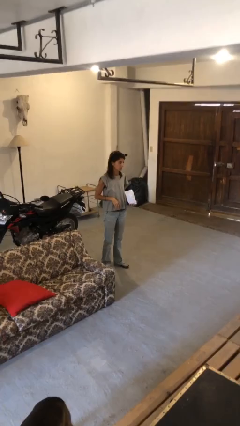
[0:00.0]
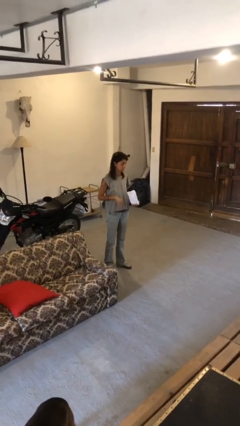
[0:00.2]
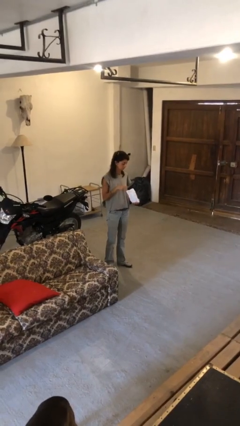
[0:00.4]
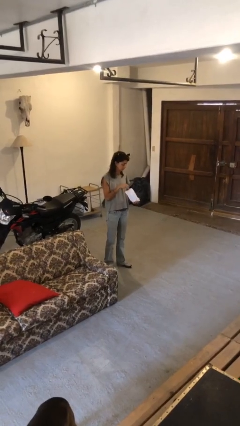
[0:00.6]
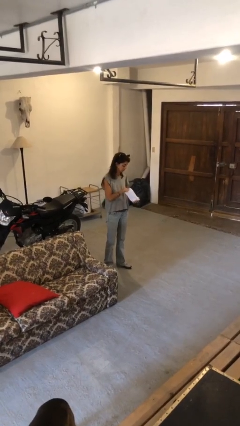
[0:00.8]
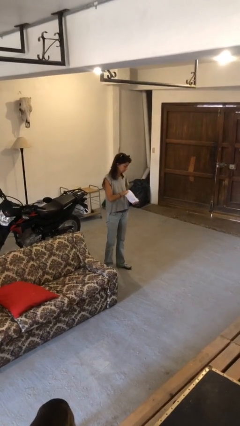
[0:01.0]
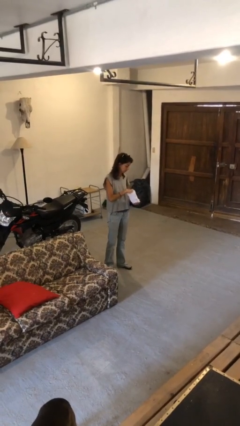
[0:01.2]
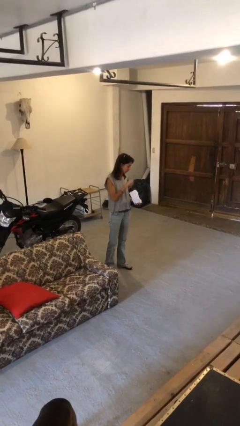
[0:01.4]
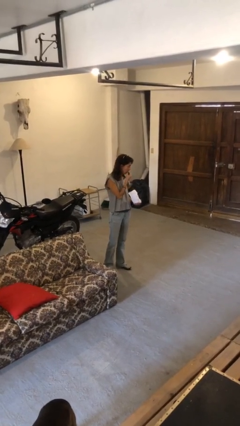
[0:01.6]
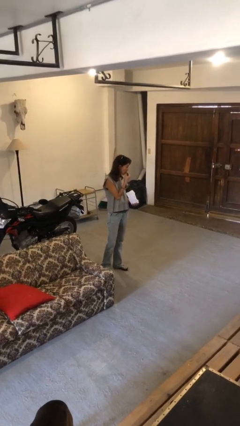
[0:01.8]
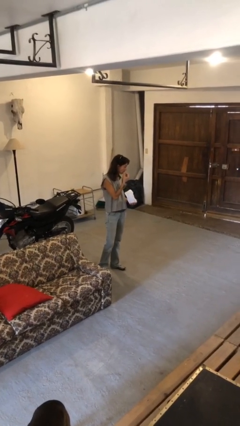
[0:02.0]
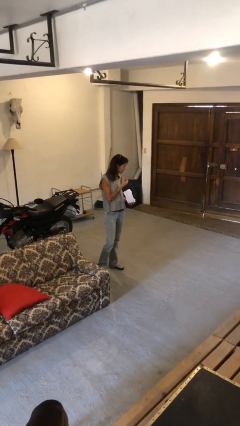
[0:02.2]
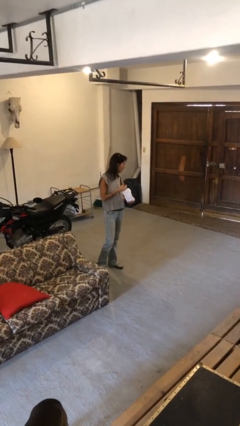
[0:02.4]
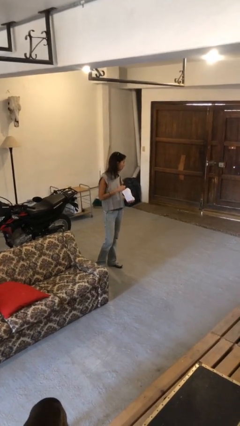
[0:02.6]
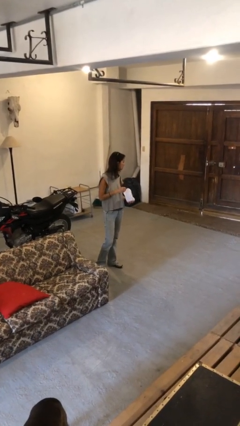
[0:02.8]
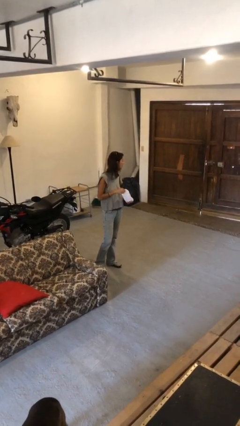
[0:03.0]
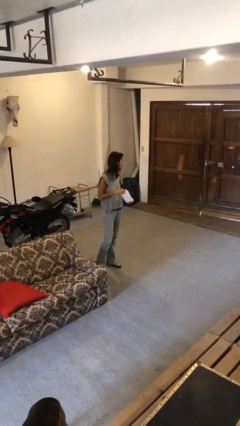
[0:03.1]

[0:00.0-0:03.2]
person eats snack from bag

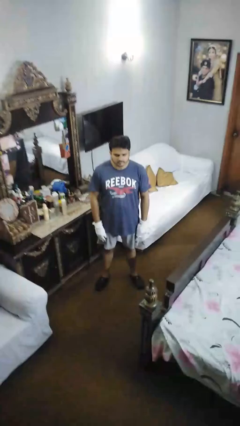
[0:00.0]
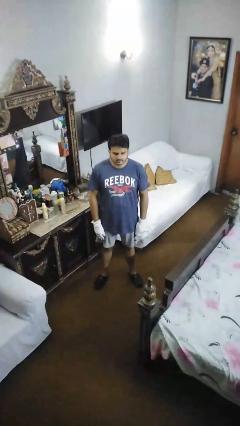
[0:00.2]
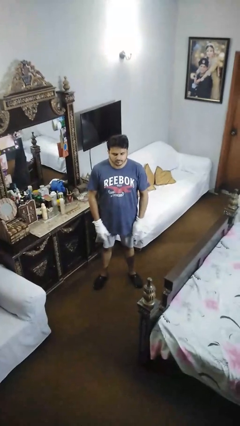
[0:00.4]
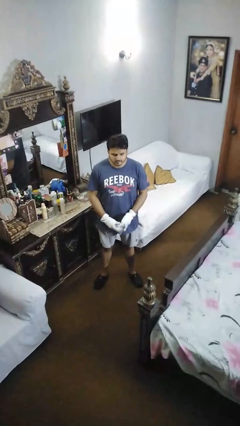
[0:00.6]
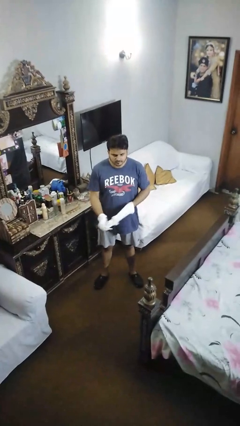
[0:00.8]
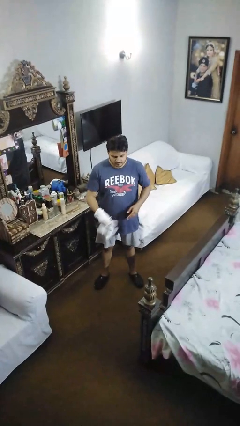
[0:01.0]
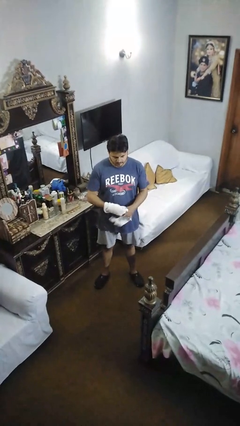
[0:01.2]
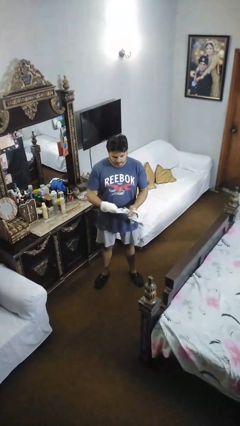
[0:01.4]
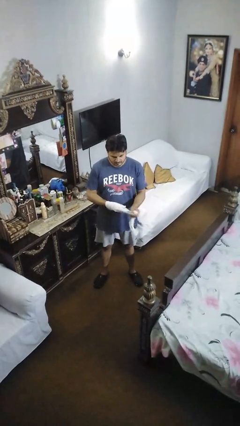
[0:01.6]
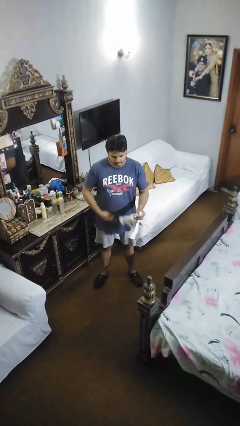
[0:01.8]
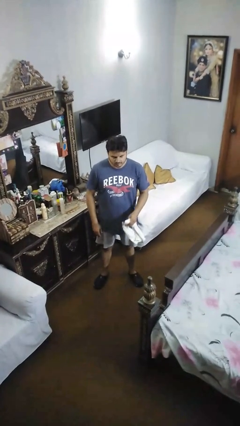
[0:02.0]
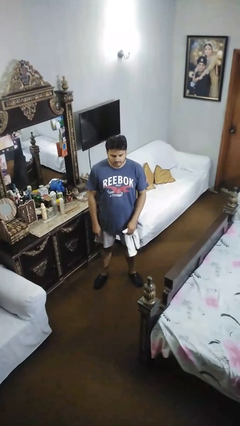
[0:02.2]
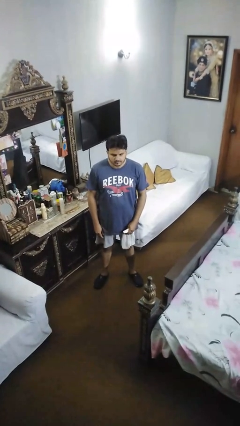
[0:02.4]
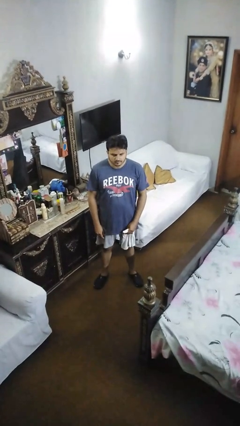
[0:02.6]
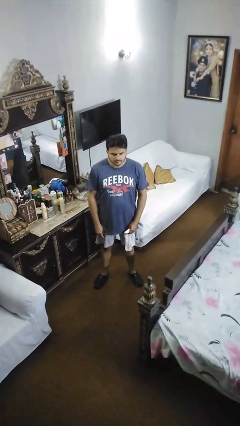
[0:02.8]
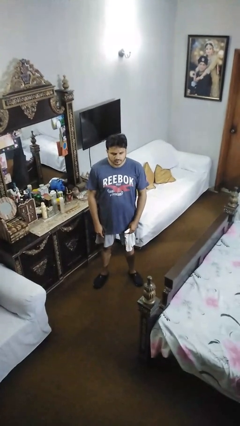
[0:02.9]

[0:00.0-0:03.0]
person takes off gloves

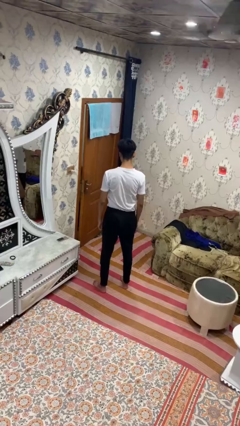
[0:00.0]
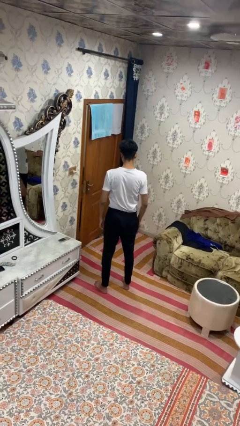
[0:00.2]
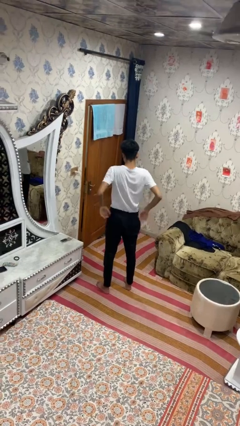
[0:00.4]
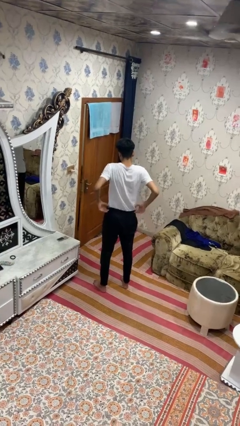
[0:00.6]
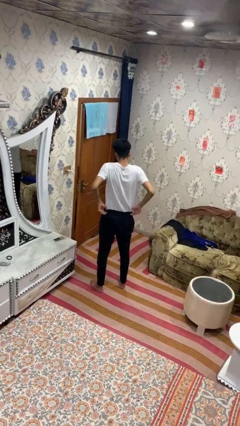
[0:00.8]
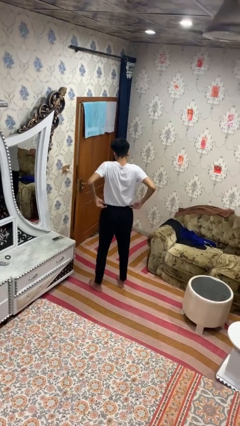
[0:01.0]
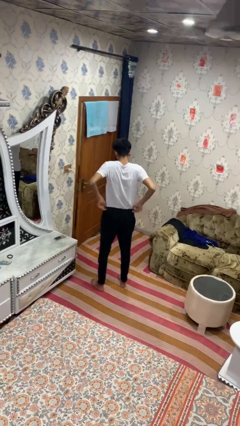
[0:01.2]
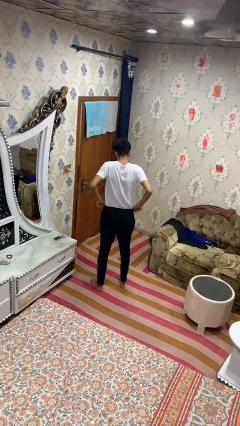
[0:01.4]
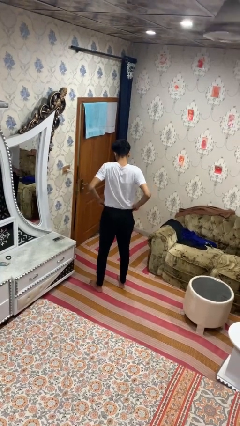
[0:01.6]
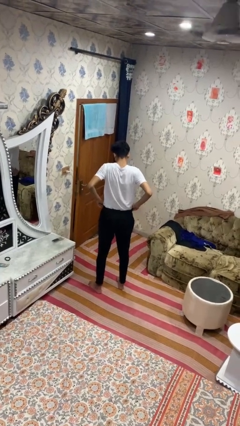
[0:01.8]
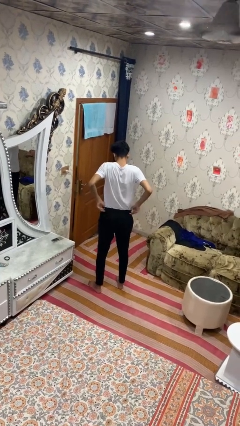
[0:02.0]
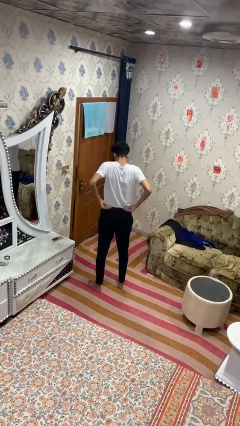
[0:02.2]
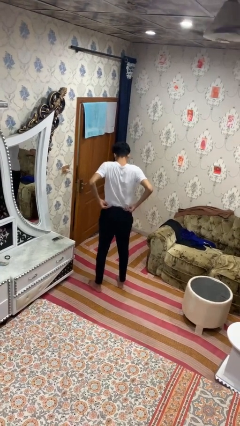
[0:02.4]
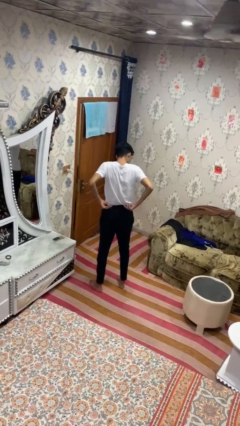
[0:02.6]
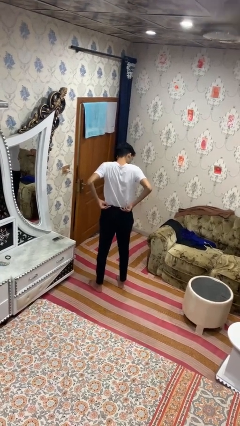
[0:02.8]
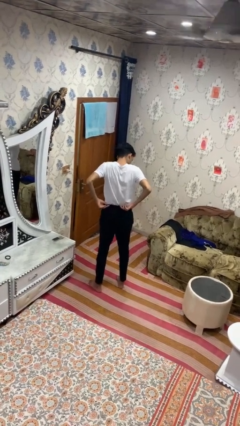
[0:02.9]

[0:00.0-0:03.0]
person hikes up pants

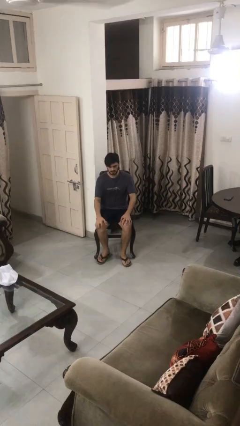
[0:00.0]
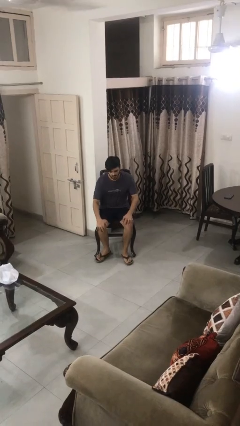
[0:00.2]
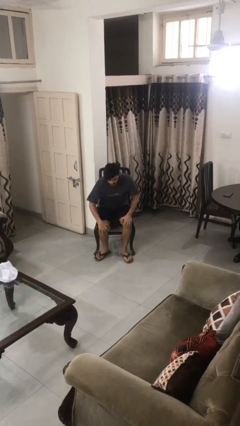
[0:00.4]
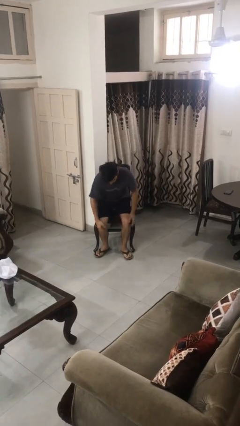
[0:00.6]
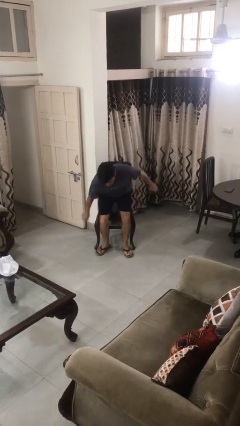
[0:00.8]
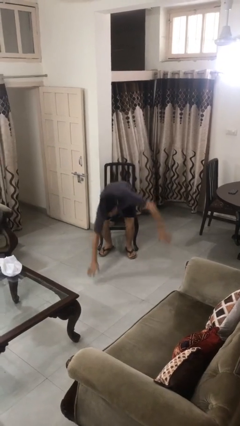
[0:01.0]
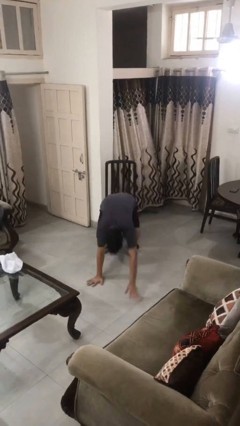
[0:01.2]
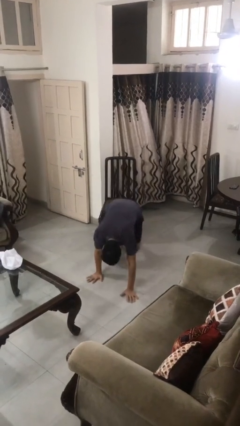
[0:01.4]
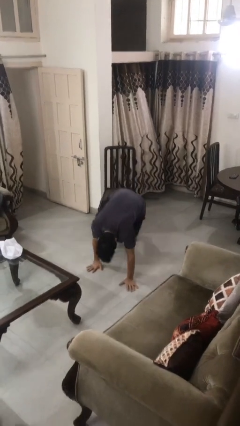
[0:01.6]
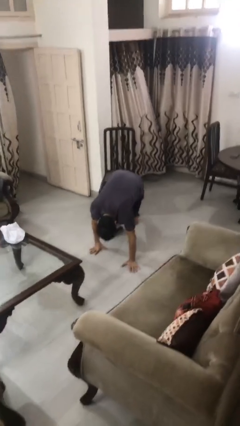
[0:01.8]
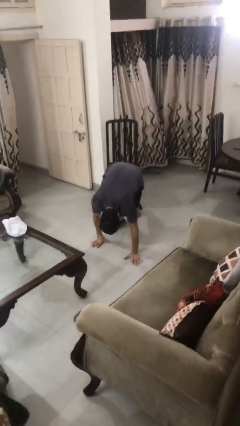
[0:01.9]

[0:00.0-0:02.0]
person falls from chair

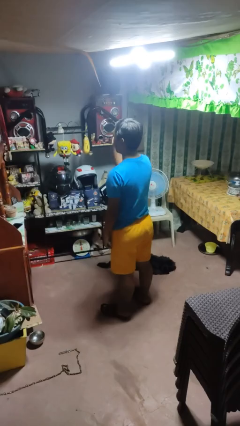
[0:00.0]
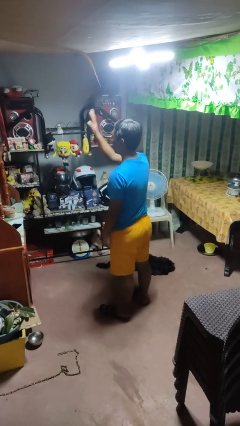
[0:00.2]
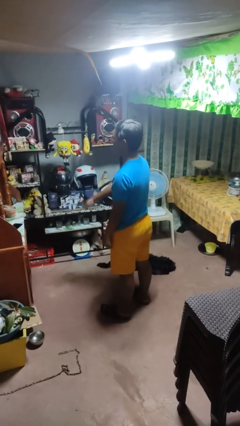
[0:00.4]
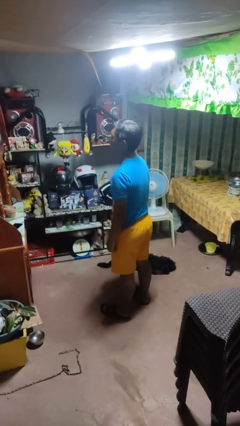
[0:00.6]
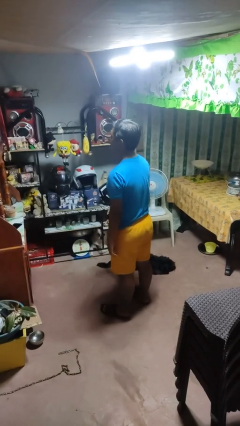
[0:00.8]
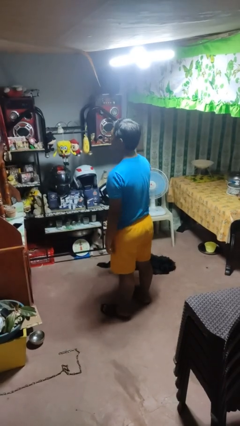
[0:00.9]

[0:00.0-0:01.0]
person gestures swipe down

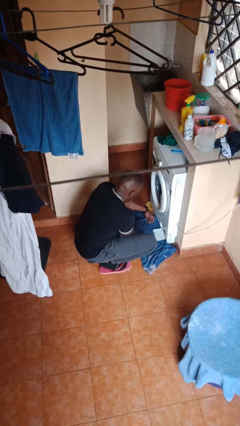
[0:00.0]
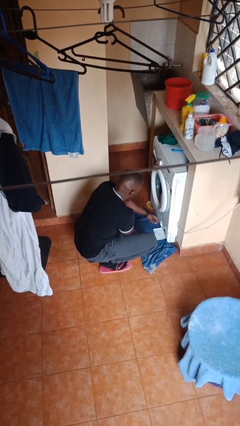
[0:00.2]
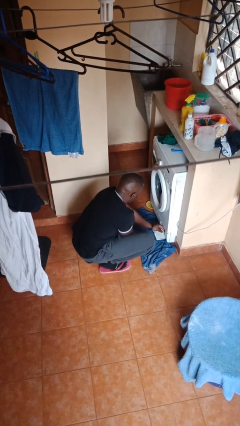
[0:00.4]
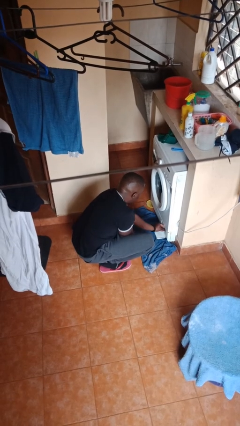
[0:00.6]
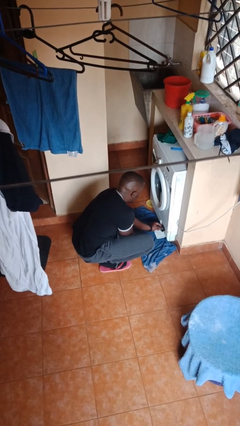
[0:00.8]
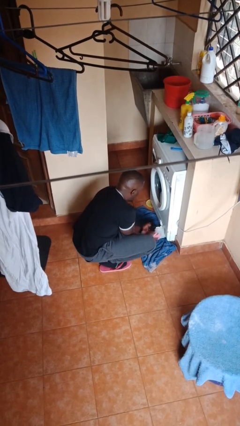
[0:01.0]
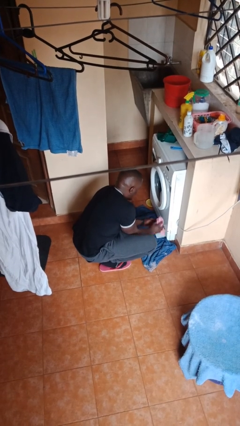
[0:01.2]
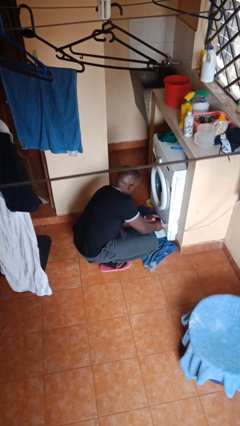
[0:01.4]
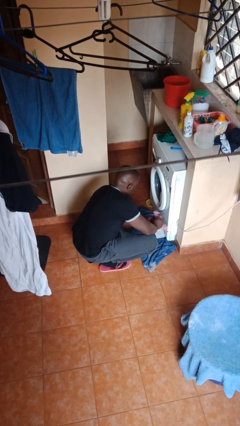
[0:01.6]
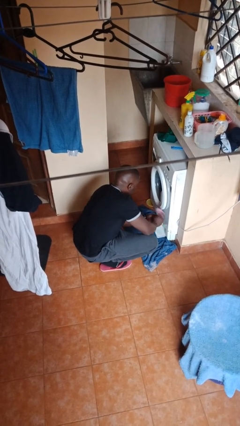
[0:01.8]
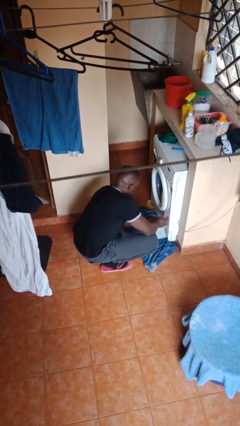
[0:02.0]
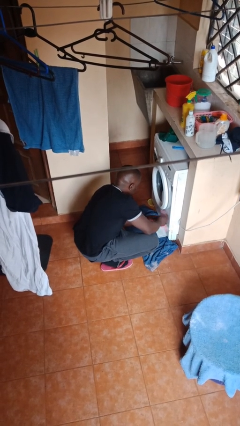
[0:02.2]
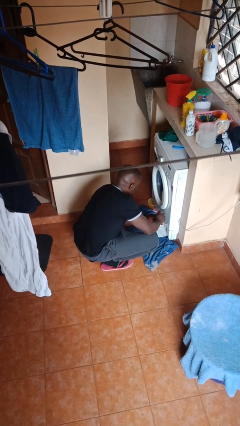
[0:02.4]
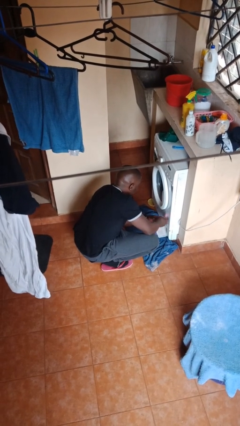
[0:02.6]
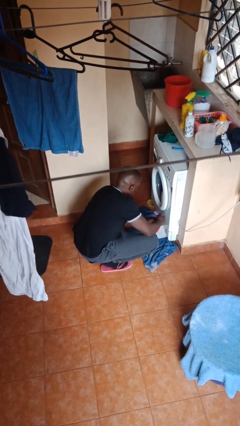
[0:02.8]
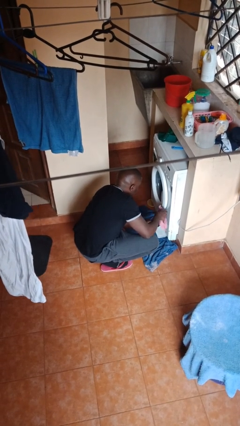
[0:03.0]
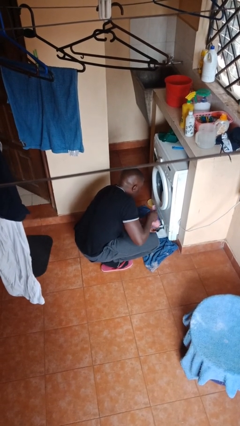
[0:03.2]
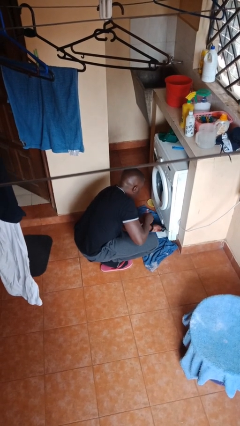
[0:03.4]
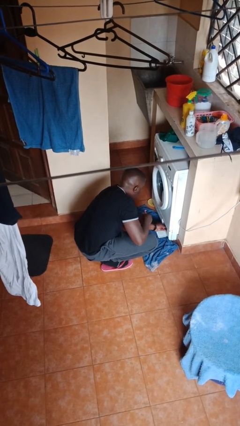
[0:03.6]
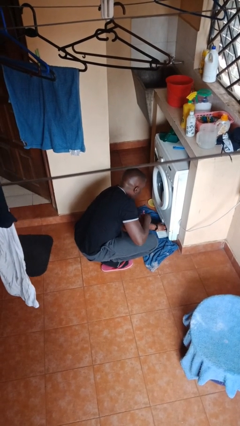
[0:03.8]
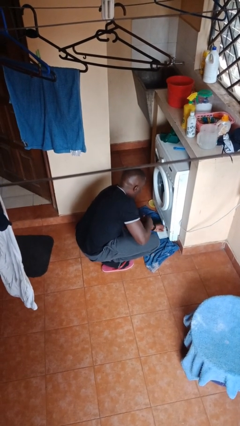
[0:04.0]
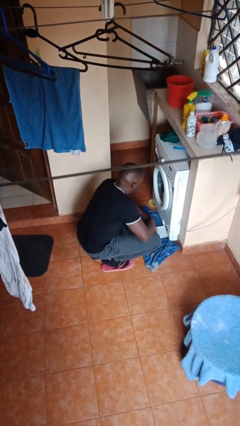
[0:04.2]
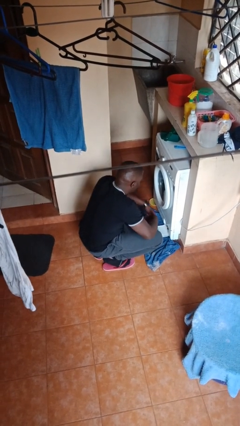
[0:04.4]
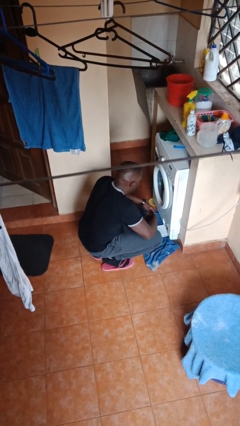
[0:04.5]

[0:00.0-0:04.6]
person cleans dryer lint trap

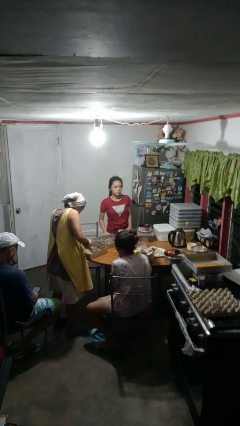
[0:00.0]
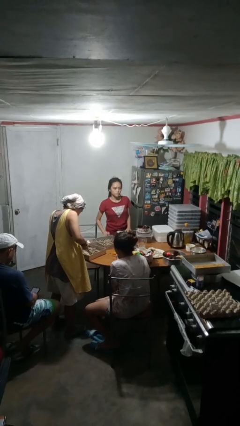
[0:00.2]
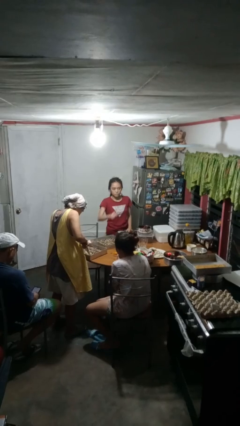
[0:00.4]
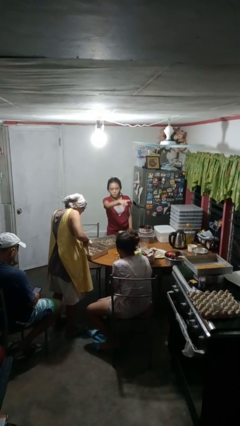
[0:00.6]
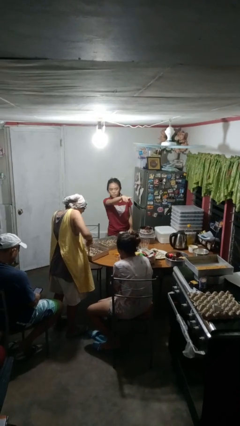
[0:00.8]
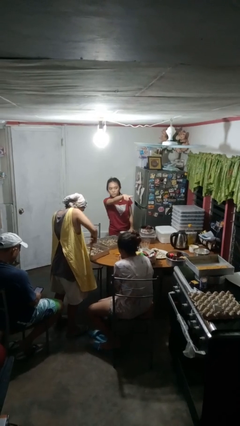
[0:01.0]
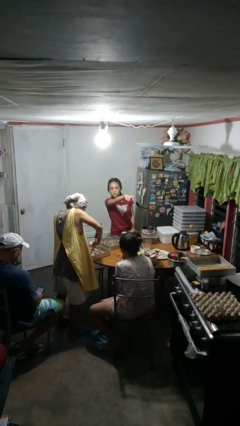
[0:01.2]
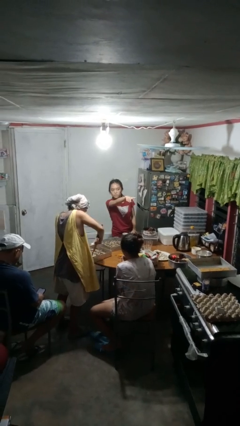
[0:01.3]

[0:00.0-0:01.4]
person points at person
